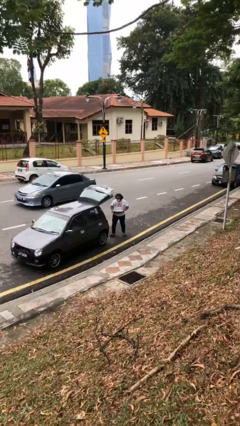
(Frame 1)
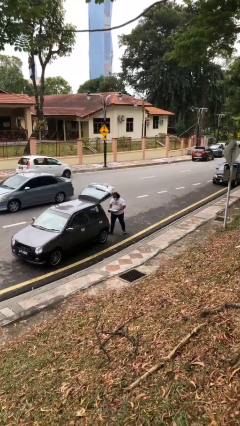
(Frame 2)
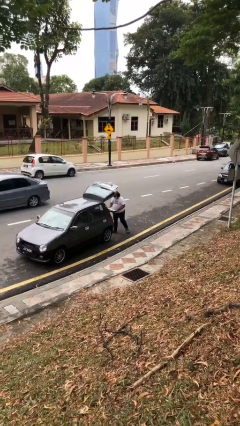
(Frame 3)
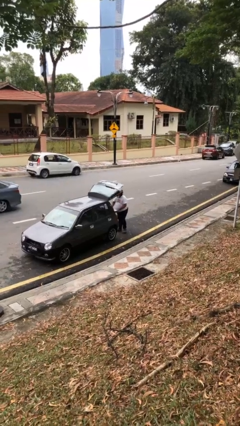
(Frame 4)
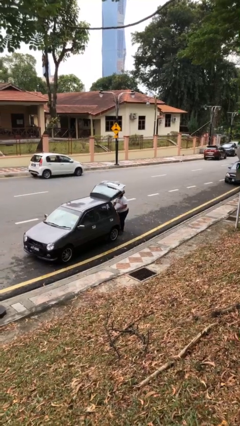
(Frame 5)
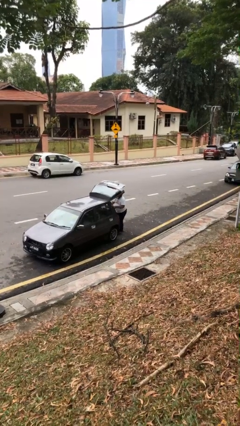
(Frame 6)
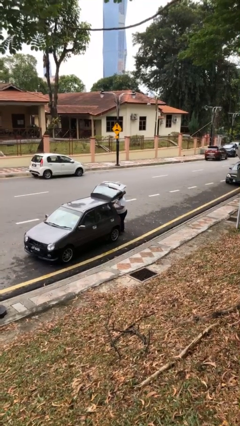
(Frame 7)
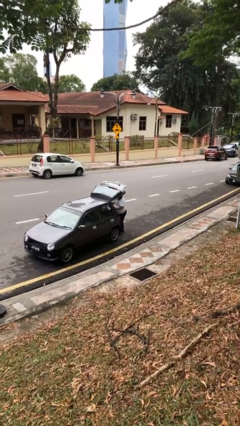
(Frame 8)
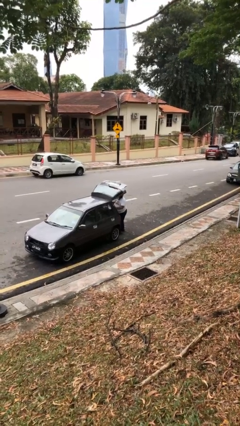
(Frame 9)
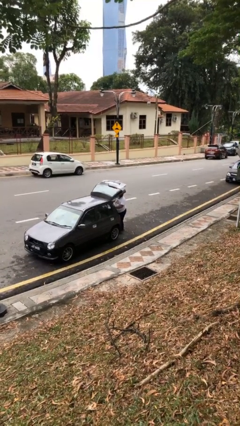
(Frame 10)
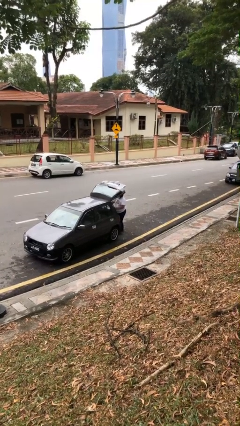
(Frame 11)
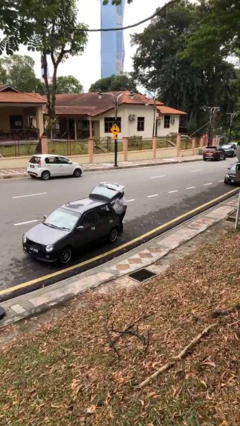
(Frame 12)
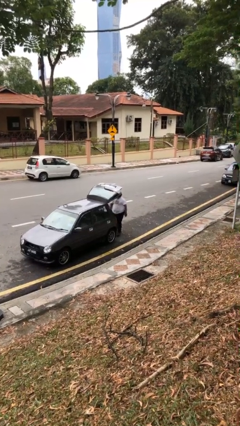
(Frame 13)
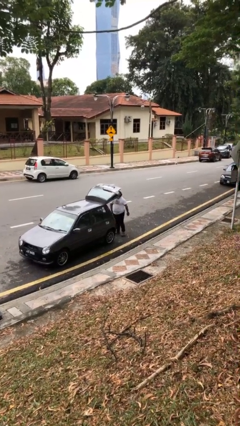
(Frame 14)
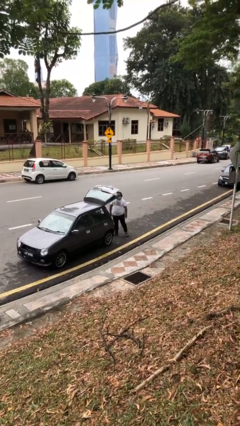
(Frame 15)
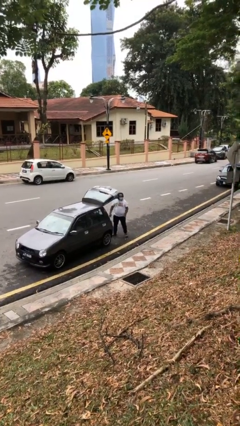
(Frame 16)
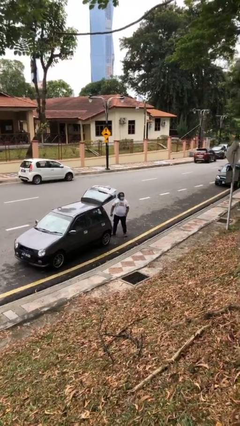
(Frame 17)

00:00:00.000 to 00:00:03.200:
person loads car

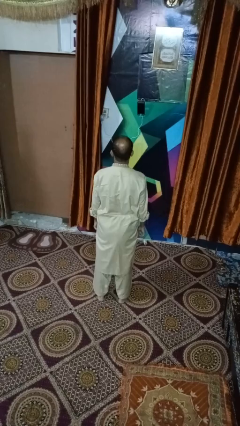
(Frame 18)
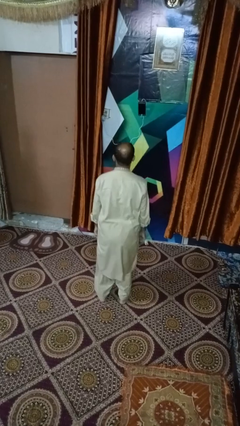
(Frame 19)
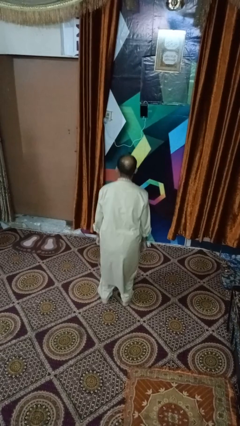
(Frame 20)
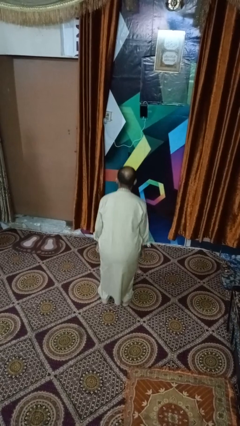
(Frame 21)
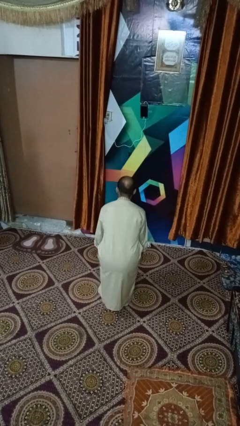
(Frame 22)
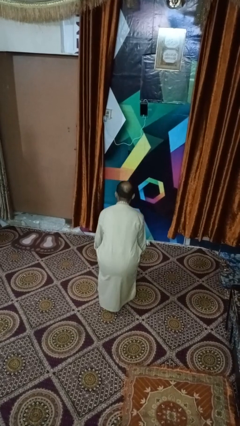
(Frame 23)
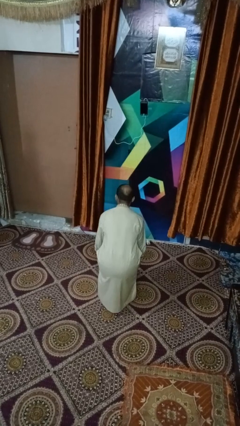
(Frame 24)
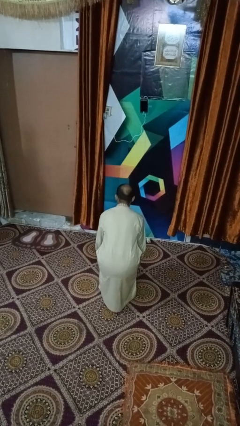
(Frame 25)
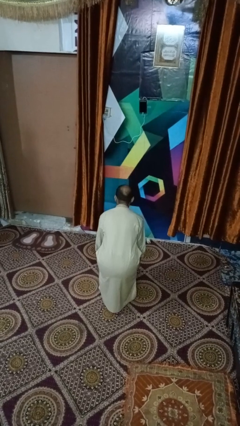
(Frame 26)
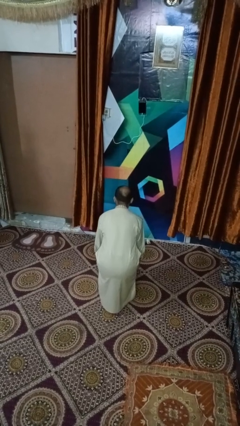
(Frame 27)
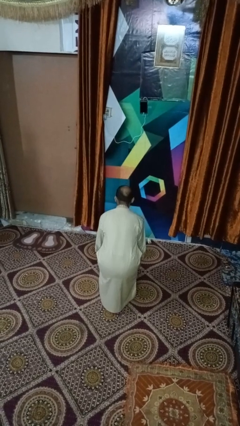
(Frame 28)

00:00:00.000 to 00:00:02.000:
person squats

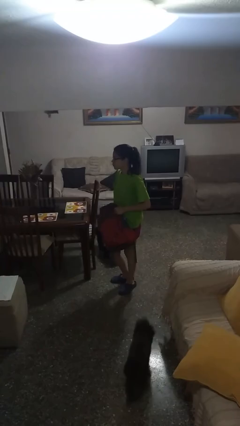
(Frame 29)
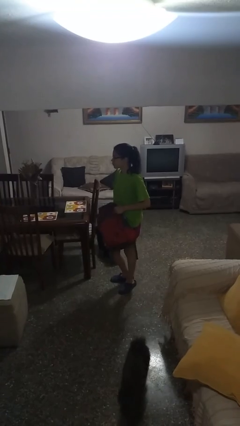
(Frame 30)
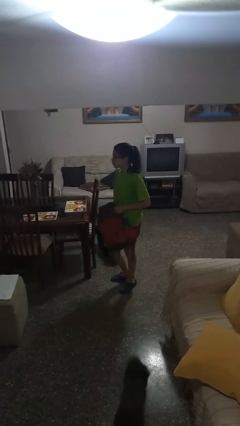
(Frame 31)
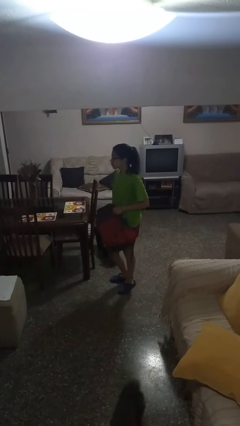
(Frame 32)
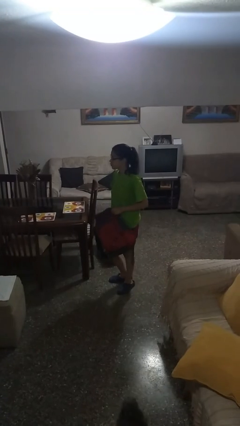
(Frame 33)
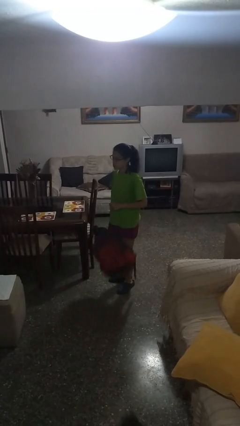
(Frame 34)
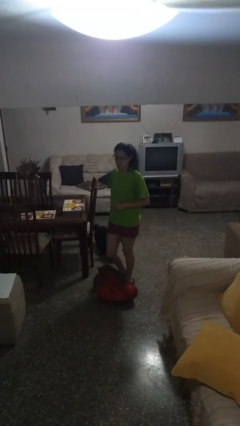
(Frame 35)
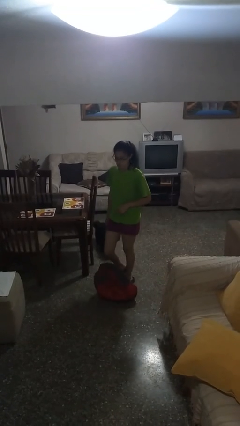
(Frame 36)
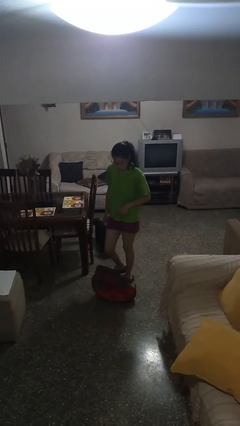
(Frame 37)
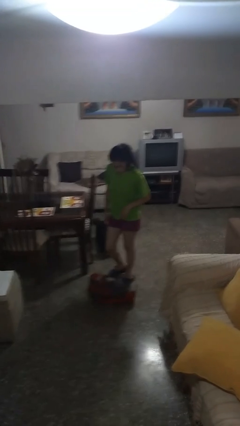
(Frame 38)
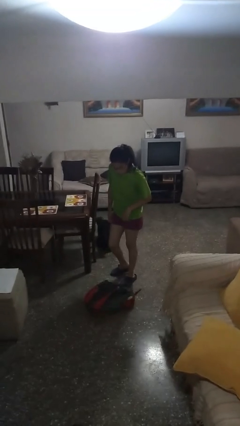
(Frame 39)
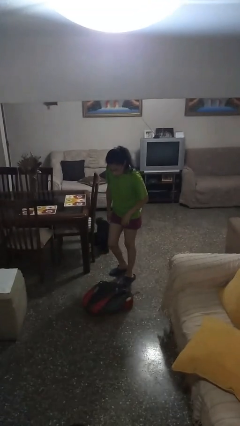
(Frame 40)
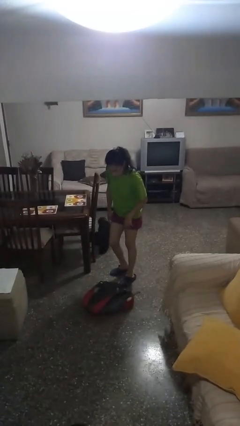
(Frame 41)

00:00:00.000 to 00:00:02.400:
person drops object

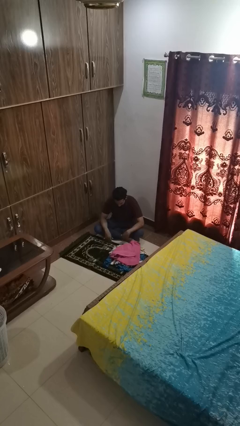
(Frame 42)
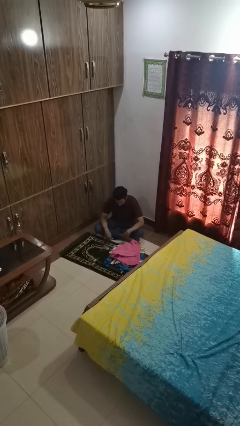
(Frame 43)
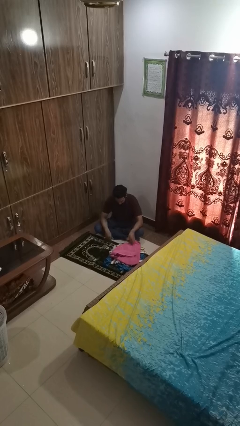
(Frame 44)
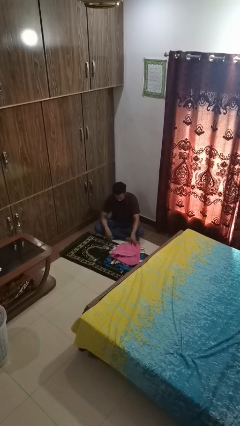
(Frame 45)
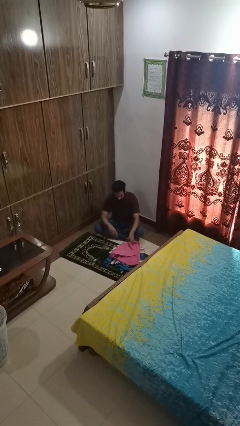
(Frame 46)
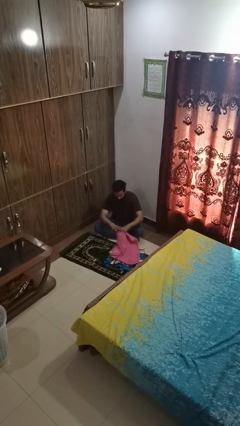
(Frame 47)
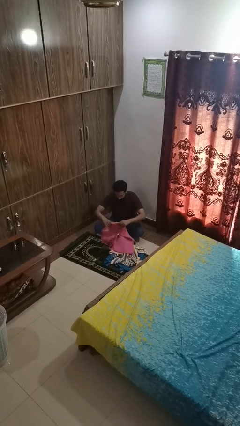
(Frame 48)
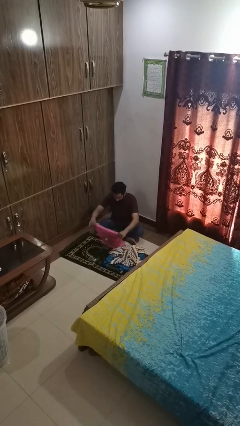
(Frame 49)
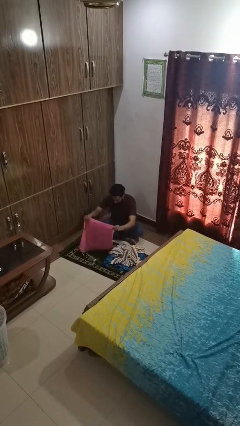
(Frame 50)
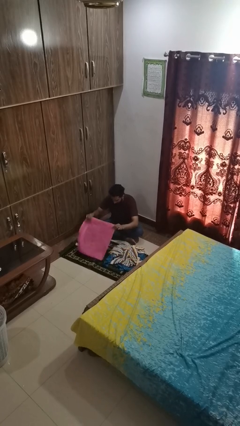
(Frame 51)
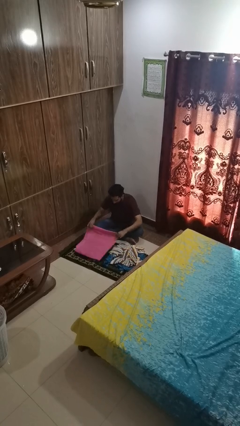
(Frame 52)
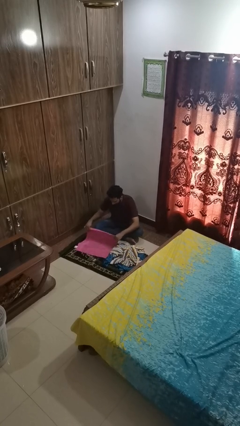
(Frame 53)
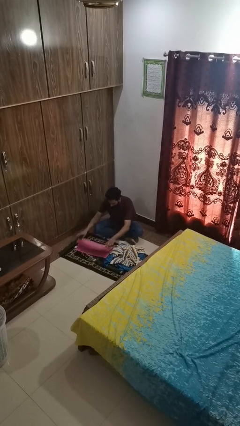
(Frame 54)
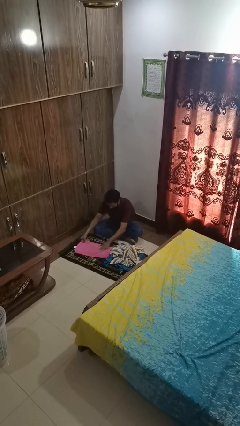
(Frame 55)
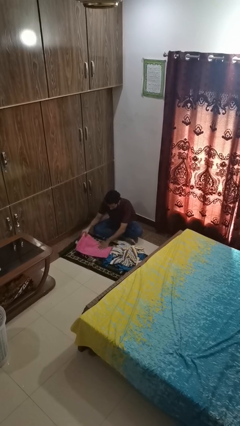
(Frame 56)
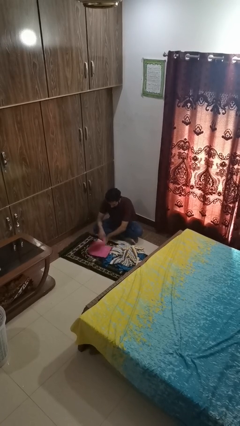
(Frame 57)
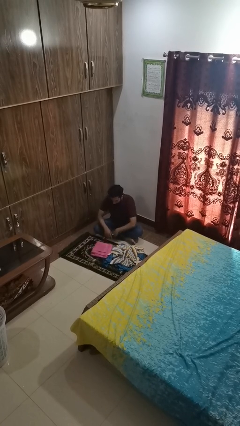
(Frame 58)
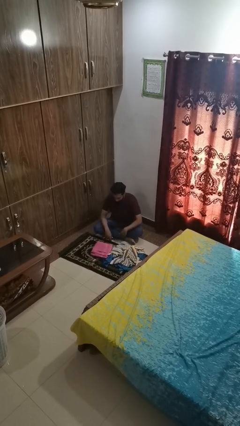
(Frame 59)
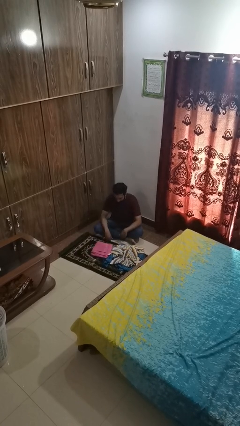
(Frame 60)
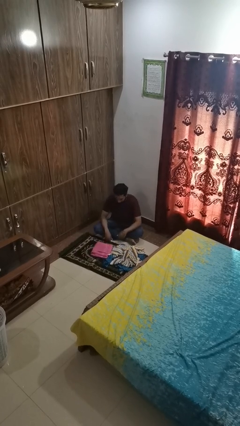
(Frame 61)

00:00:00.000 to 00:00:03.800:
person folds towel

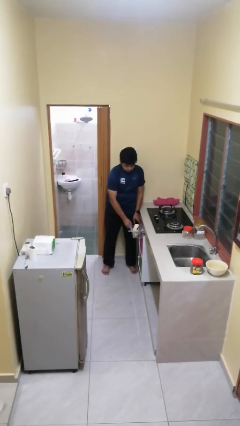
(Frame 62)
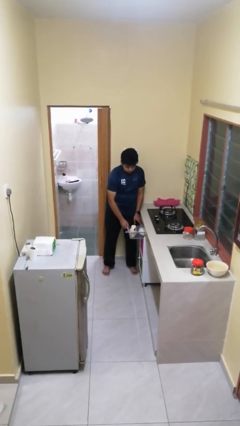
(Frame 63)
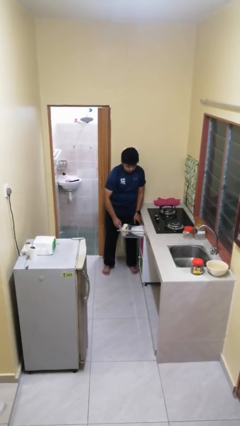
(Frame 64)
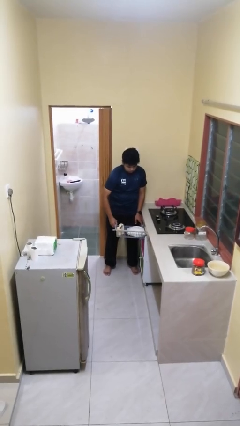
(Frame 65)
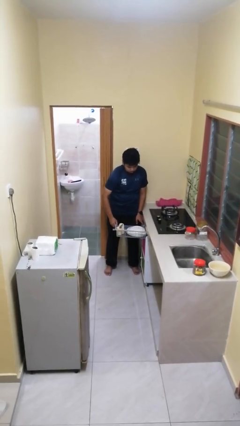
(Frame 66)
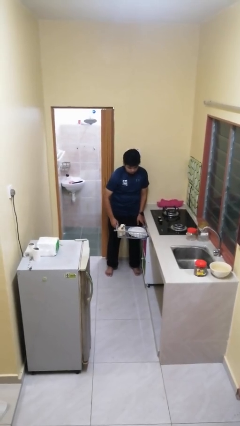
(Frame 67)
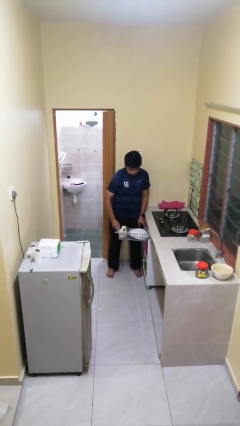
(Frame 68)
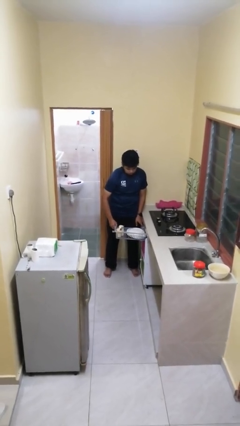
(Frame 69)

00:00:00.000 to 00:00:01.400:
person opens kitchen drawer

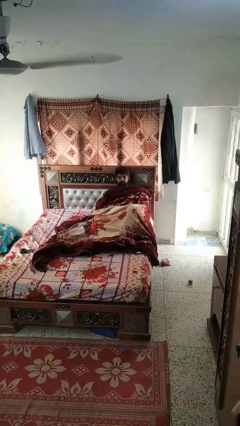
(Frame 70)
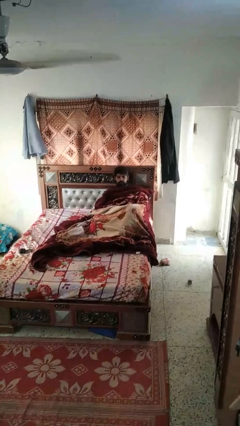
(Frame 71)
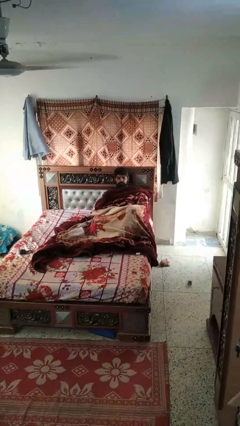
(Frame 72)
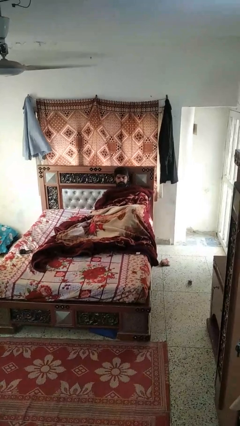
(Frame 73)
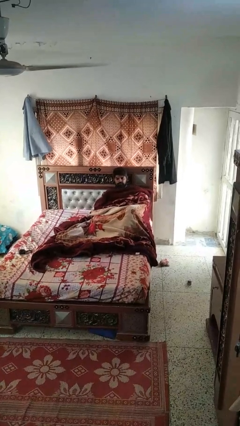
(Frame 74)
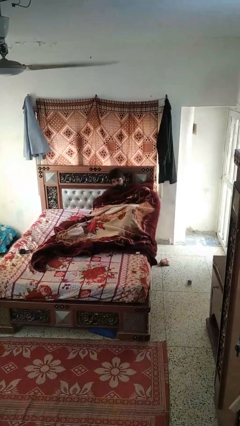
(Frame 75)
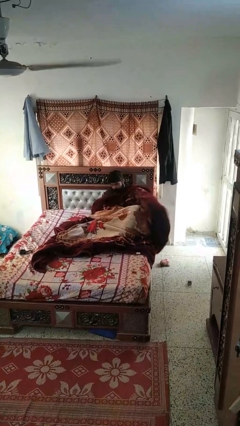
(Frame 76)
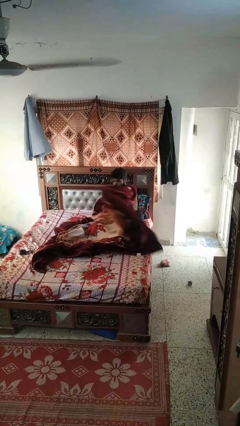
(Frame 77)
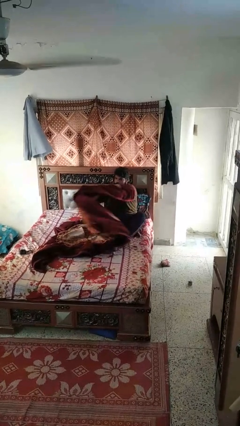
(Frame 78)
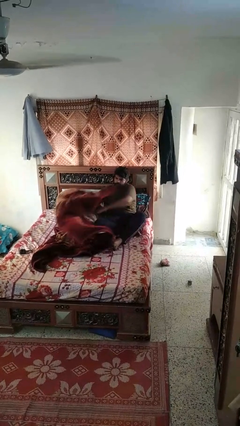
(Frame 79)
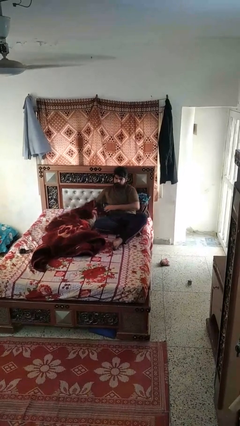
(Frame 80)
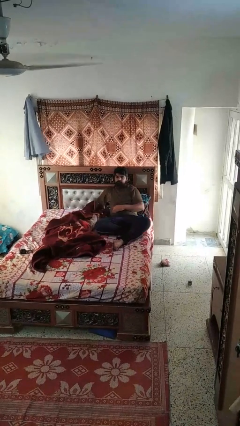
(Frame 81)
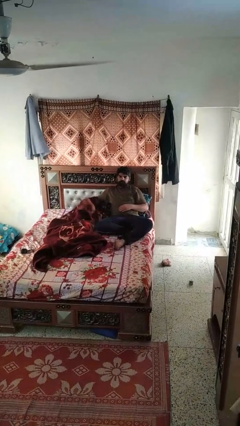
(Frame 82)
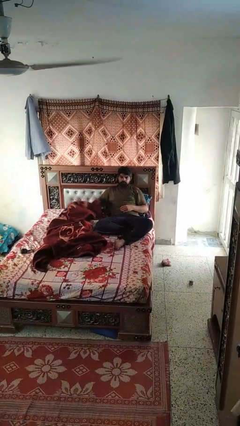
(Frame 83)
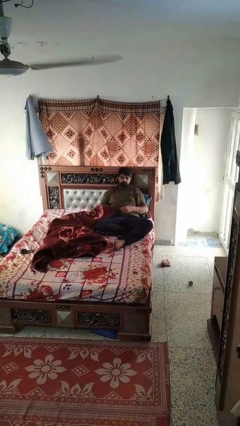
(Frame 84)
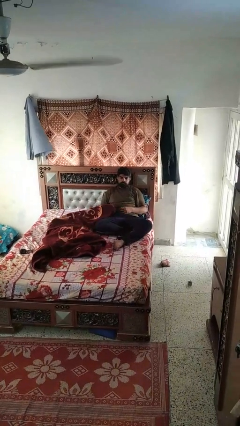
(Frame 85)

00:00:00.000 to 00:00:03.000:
person uncovers with blanket

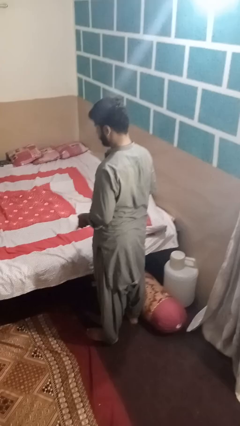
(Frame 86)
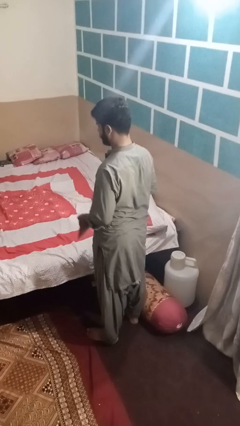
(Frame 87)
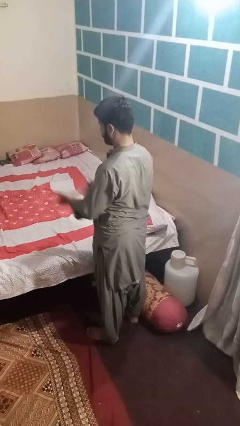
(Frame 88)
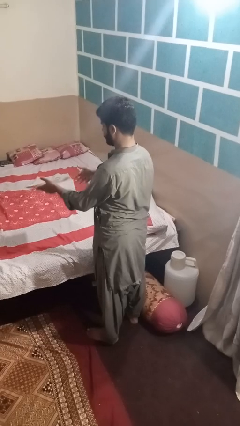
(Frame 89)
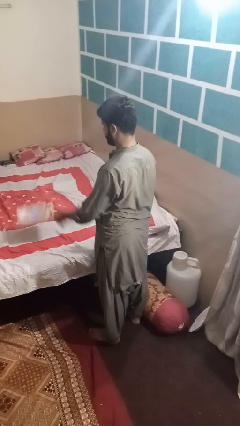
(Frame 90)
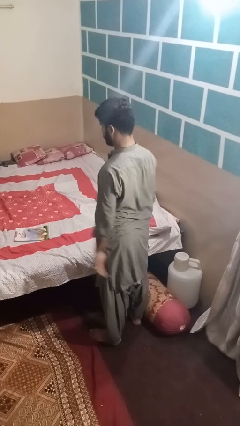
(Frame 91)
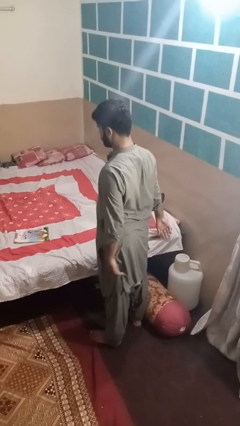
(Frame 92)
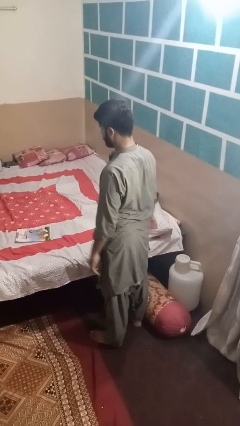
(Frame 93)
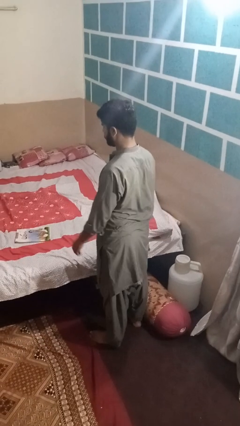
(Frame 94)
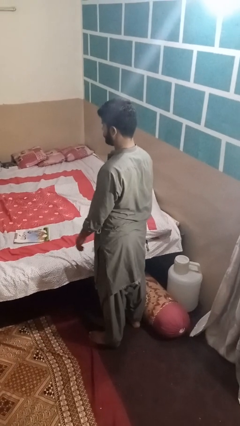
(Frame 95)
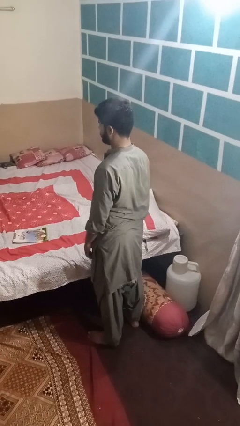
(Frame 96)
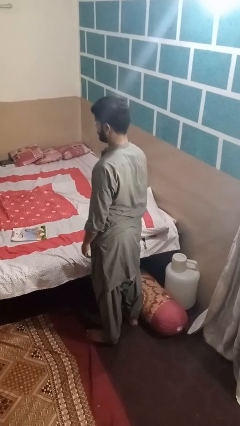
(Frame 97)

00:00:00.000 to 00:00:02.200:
person throws object on bed
